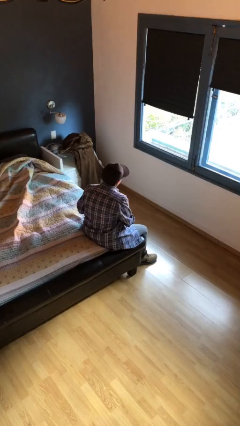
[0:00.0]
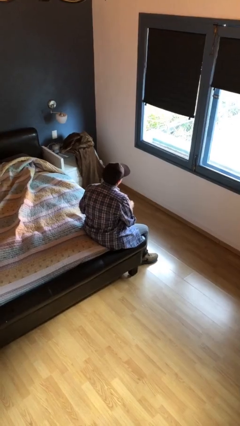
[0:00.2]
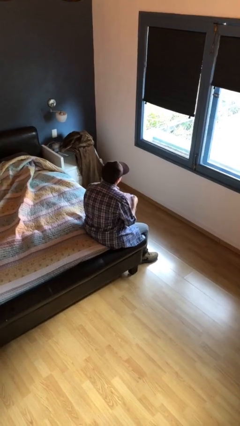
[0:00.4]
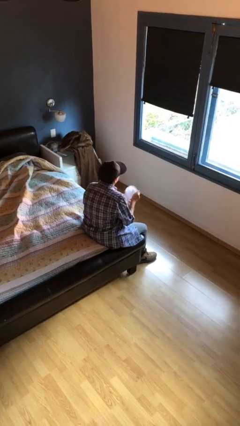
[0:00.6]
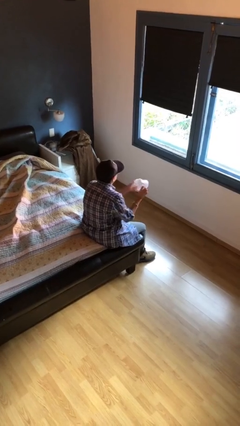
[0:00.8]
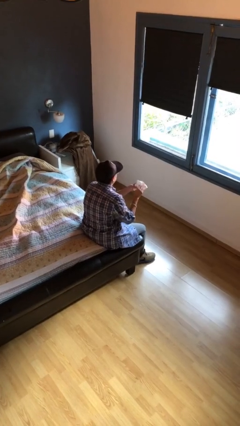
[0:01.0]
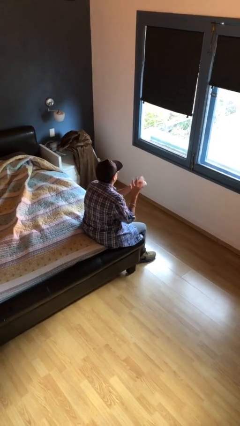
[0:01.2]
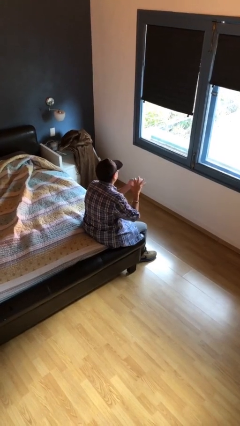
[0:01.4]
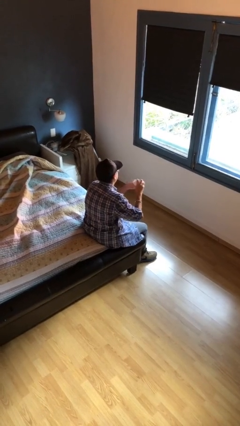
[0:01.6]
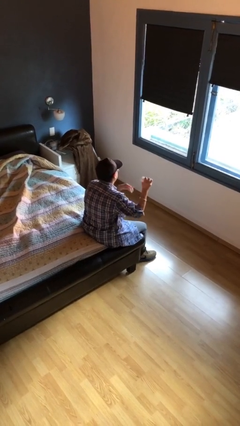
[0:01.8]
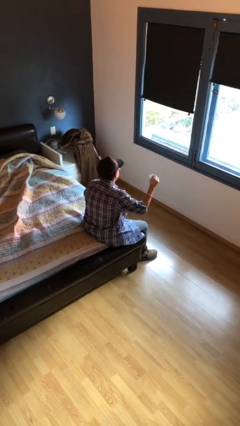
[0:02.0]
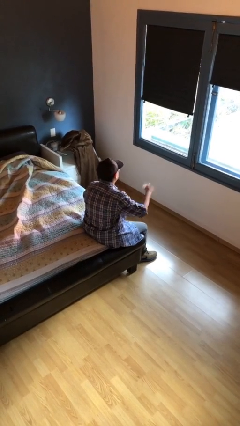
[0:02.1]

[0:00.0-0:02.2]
person crumples paper

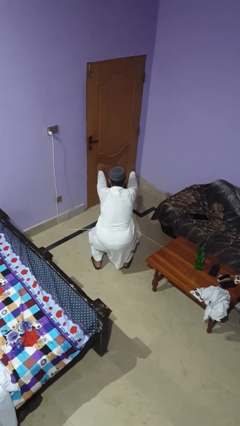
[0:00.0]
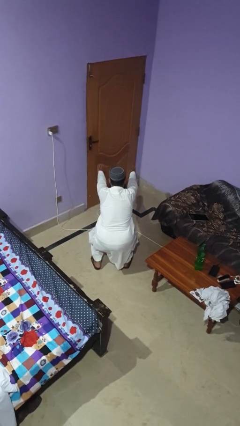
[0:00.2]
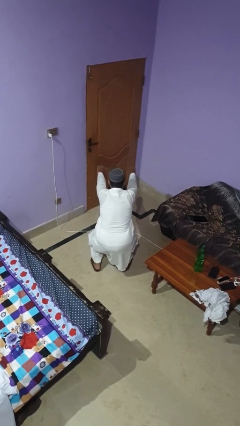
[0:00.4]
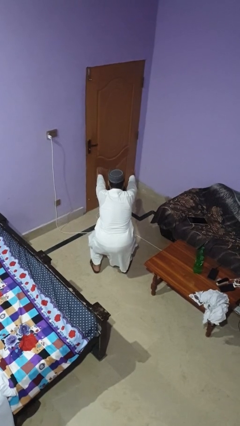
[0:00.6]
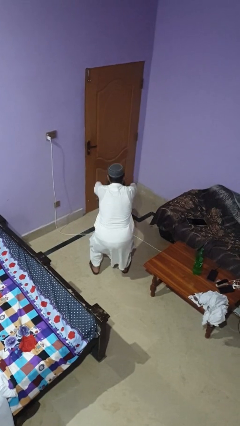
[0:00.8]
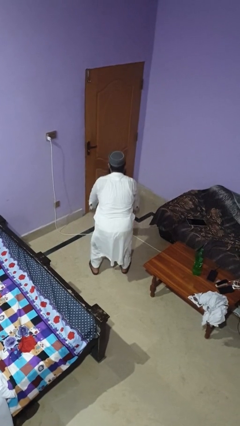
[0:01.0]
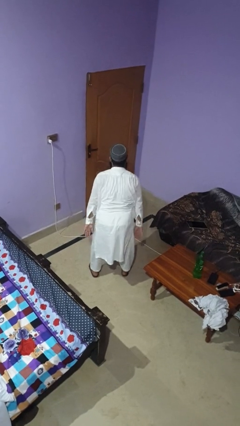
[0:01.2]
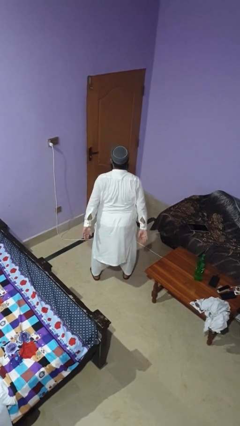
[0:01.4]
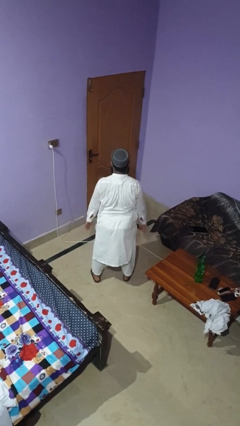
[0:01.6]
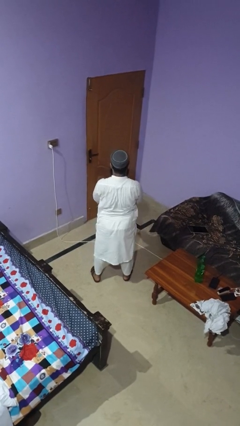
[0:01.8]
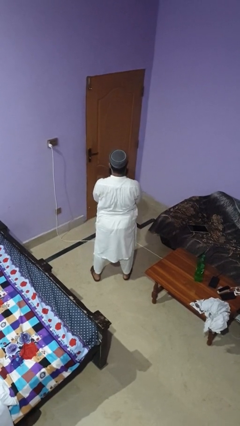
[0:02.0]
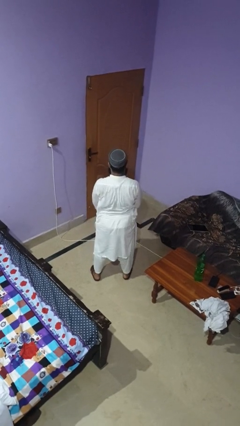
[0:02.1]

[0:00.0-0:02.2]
person stands up

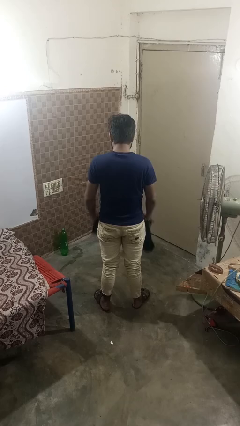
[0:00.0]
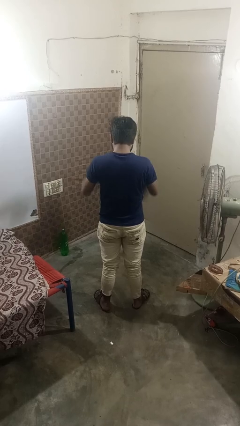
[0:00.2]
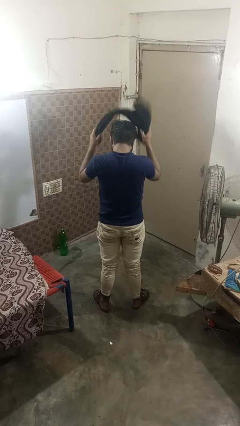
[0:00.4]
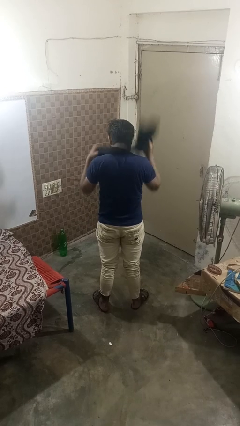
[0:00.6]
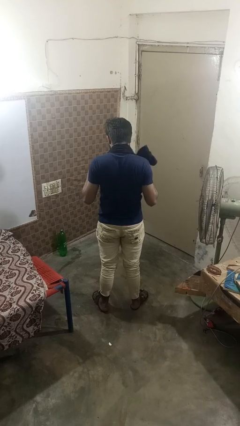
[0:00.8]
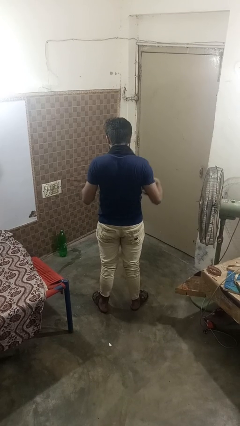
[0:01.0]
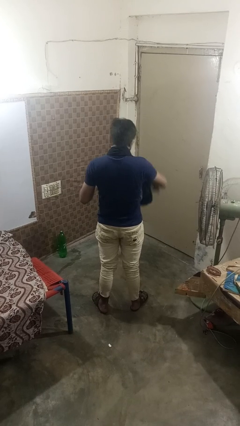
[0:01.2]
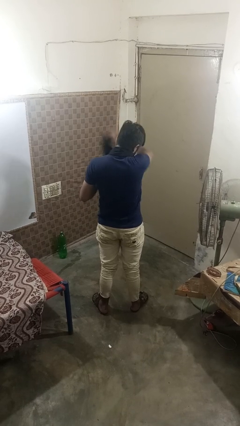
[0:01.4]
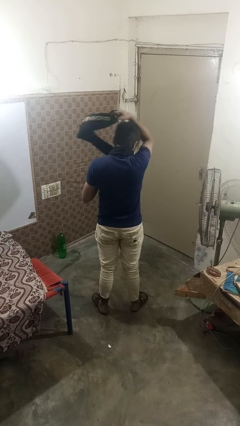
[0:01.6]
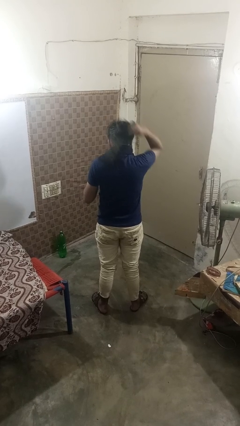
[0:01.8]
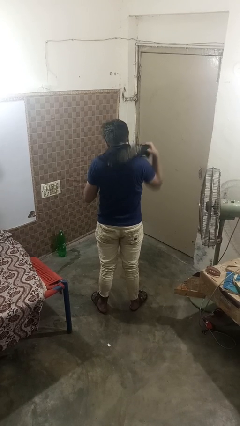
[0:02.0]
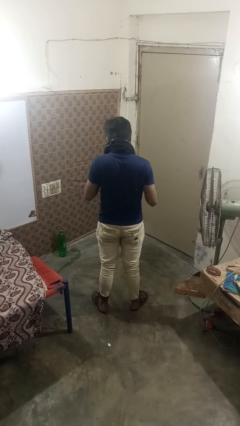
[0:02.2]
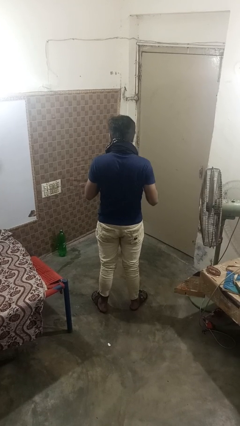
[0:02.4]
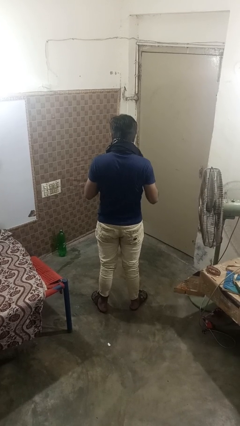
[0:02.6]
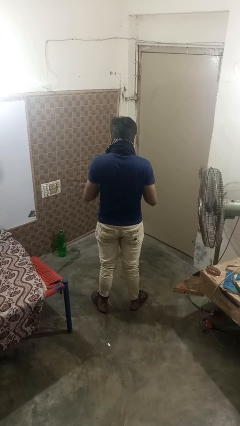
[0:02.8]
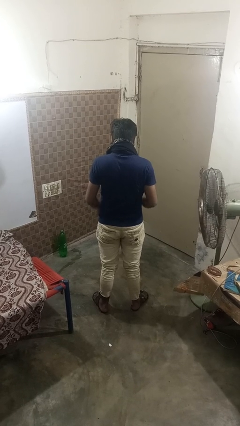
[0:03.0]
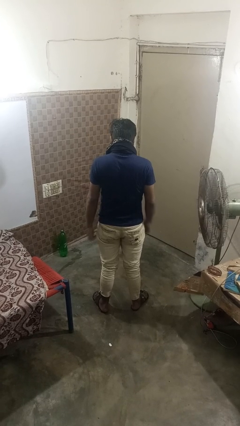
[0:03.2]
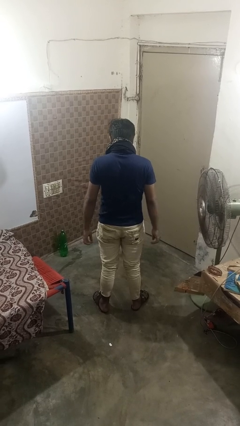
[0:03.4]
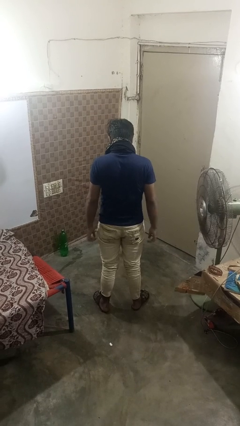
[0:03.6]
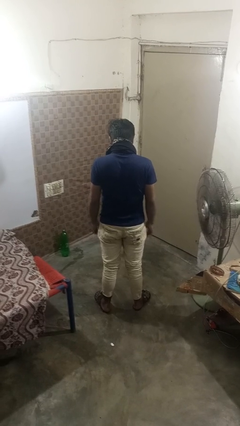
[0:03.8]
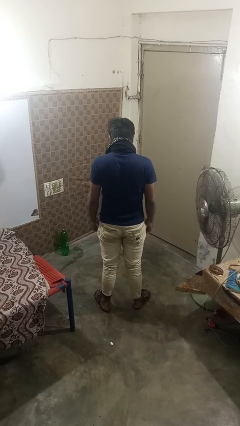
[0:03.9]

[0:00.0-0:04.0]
person puts on scarf

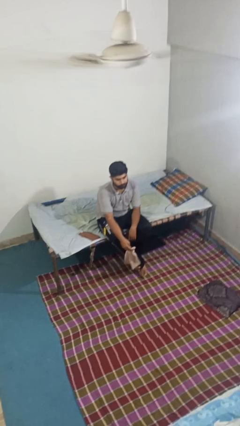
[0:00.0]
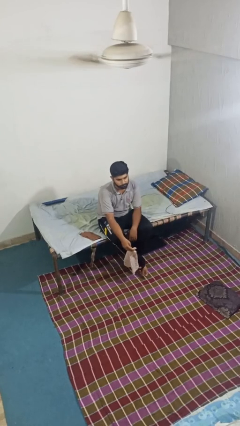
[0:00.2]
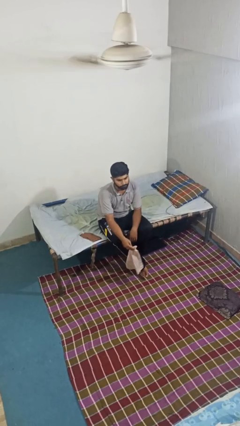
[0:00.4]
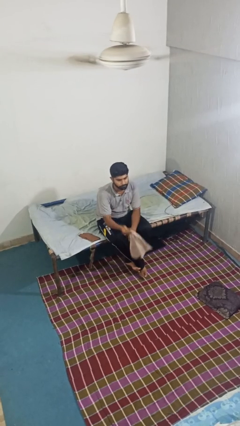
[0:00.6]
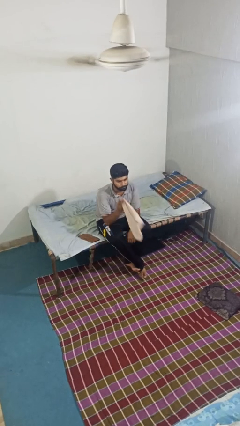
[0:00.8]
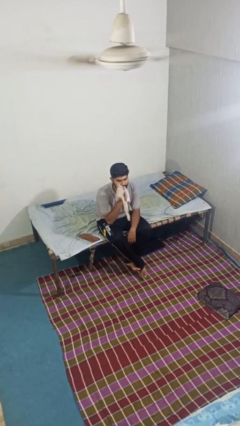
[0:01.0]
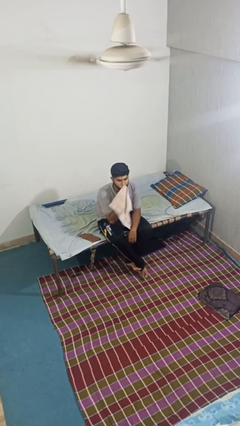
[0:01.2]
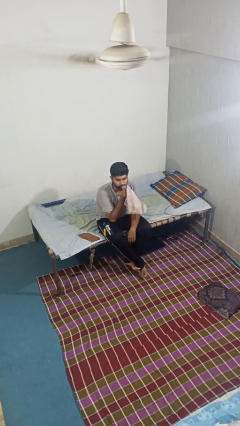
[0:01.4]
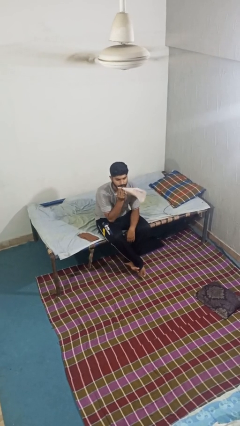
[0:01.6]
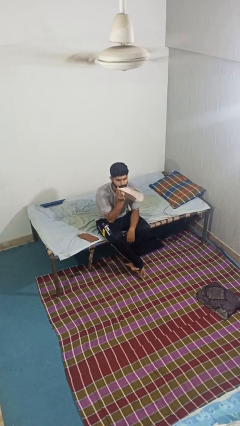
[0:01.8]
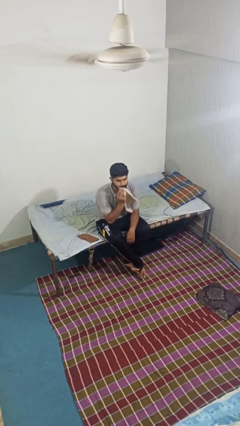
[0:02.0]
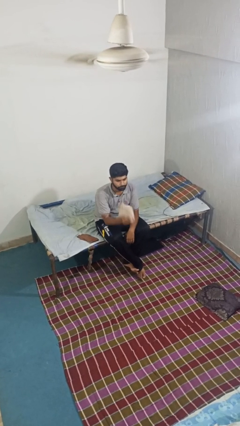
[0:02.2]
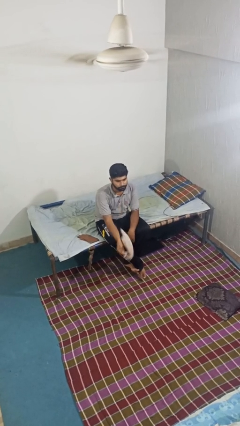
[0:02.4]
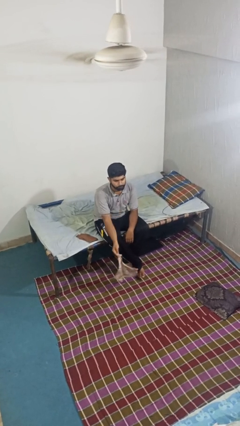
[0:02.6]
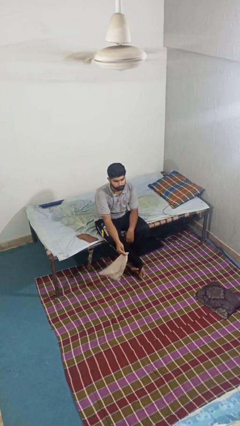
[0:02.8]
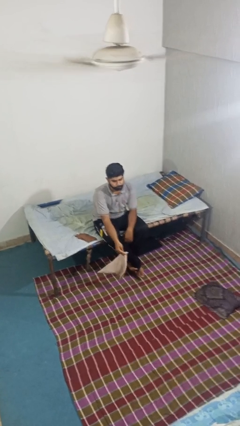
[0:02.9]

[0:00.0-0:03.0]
person wipes mouth with napkin

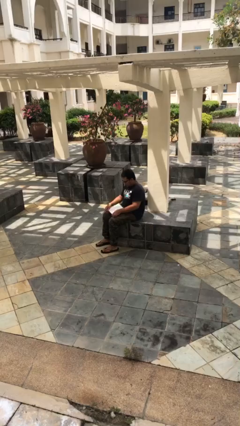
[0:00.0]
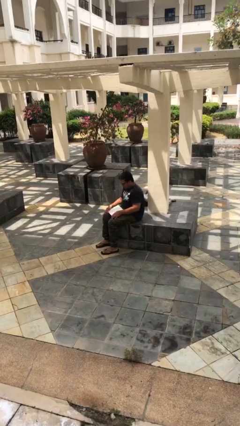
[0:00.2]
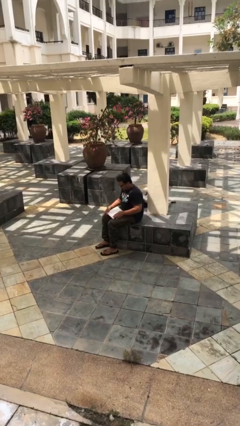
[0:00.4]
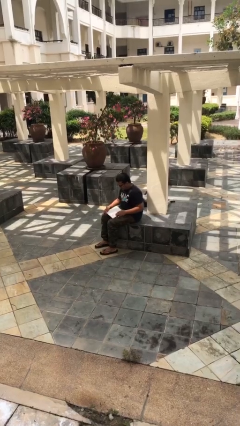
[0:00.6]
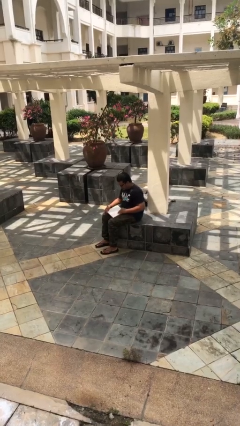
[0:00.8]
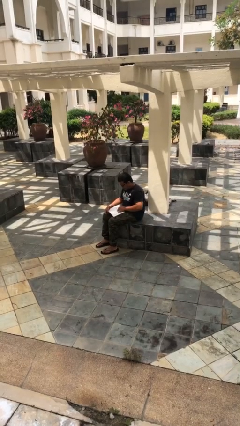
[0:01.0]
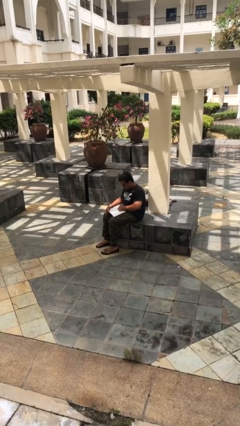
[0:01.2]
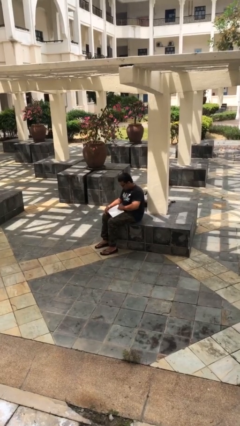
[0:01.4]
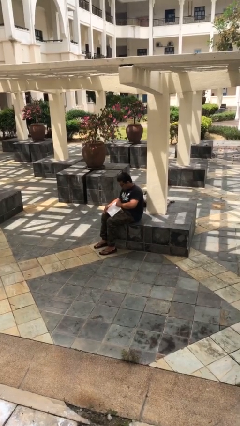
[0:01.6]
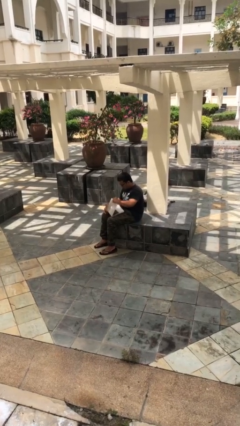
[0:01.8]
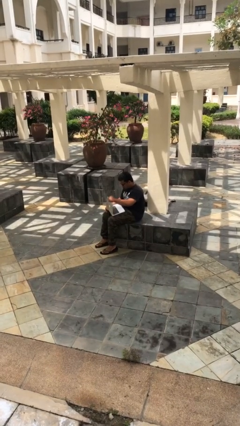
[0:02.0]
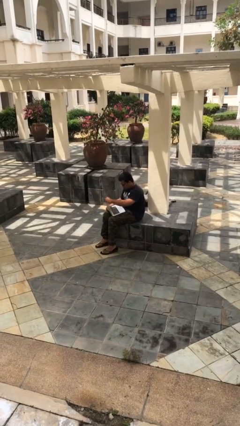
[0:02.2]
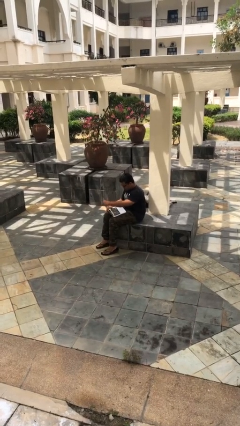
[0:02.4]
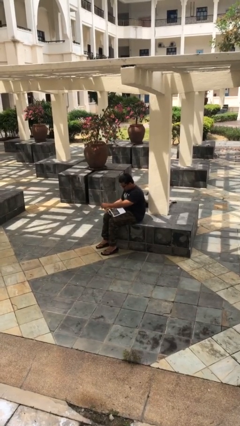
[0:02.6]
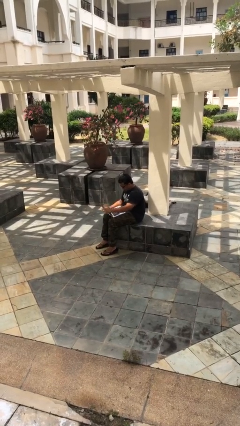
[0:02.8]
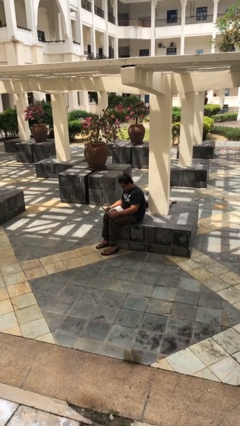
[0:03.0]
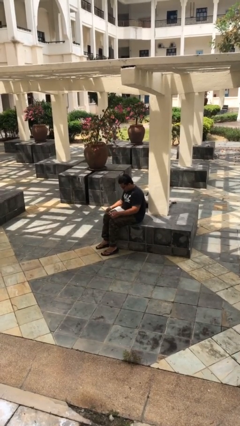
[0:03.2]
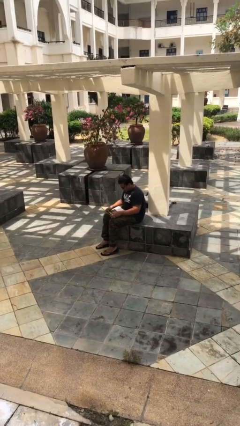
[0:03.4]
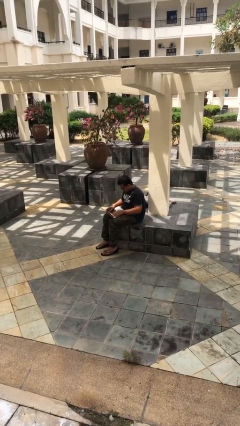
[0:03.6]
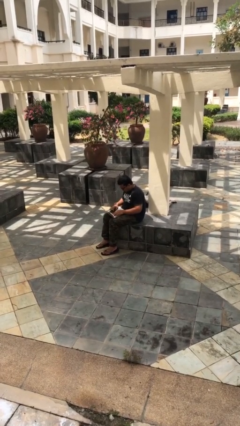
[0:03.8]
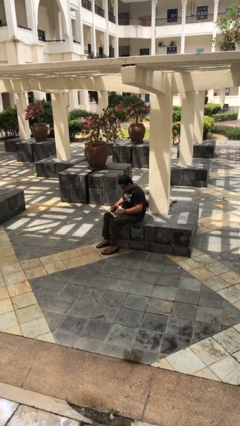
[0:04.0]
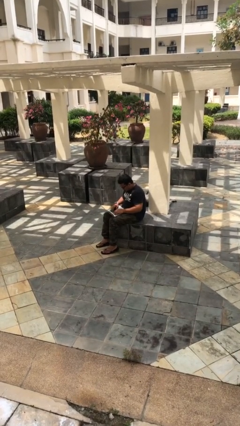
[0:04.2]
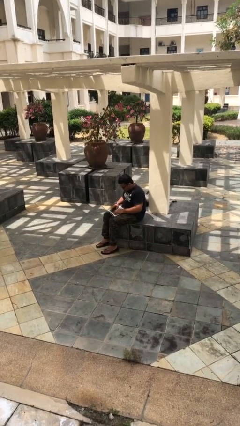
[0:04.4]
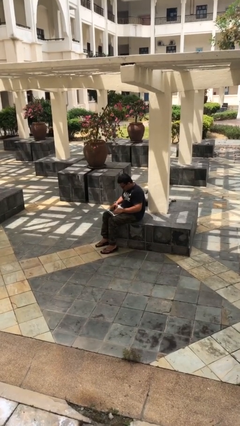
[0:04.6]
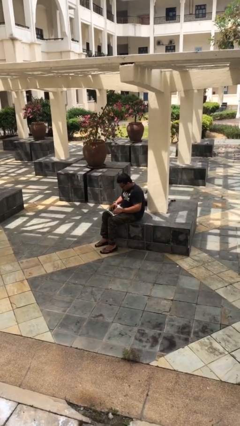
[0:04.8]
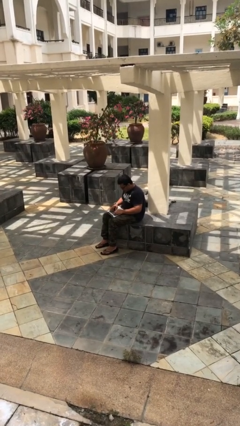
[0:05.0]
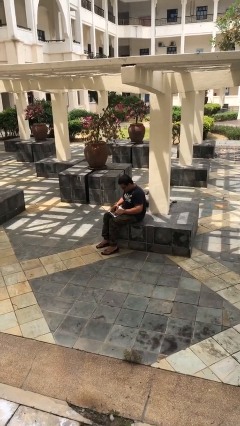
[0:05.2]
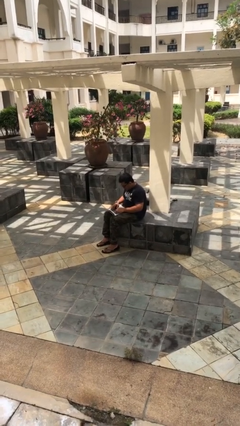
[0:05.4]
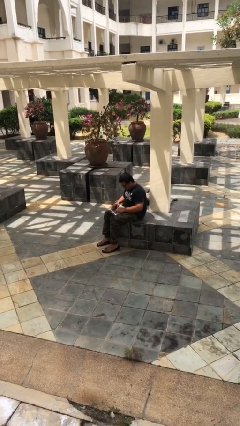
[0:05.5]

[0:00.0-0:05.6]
person interacts with laptop

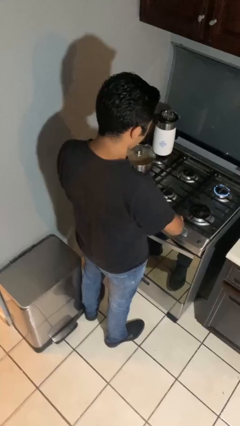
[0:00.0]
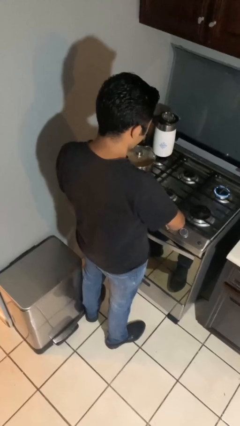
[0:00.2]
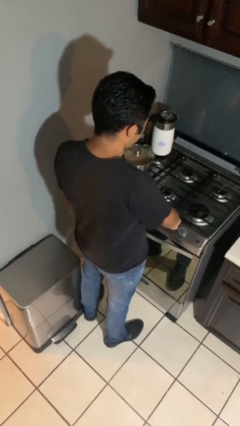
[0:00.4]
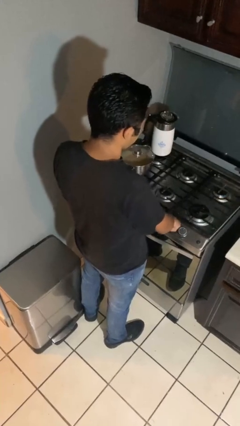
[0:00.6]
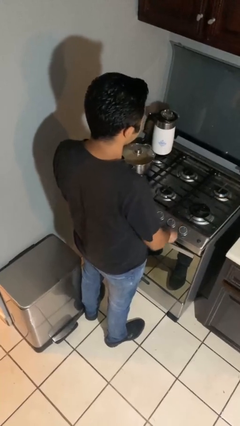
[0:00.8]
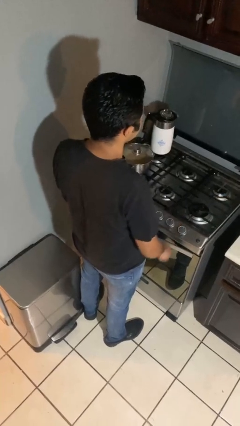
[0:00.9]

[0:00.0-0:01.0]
person turns off stovetop
